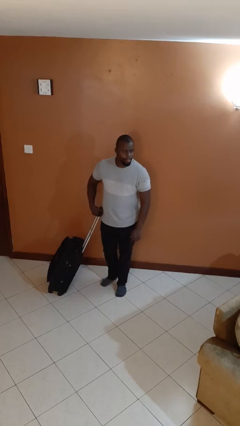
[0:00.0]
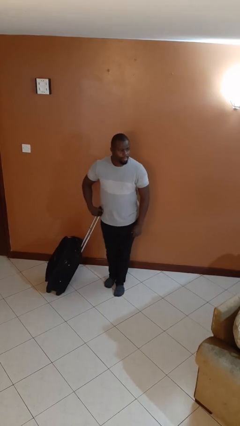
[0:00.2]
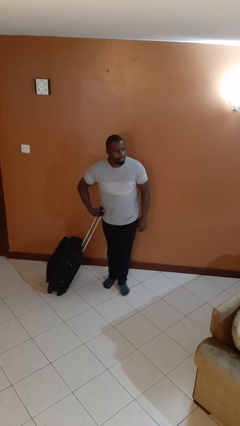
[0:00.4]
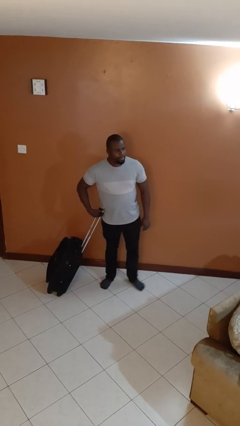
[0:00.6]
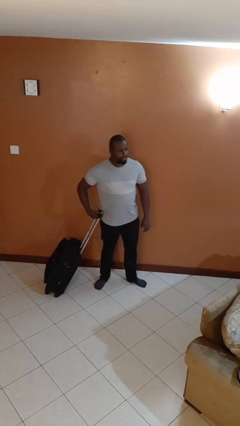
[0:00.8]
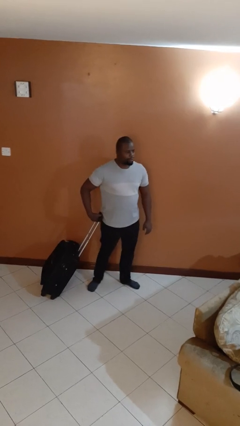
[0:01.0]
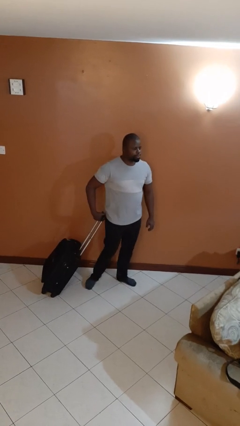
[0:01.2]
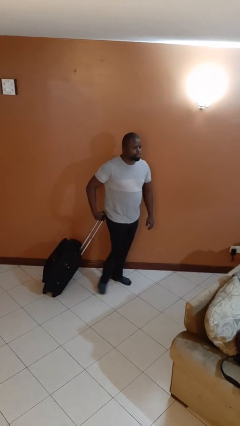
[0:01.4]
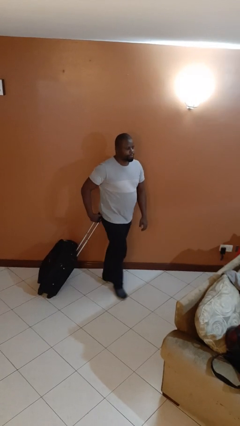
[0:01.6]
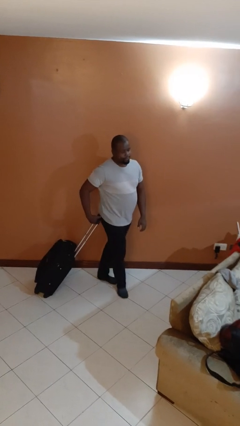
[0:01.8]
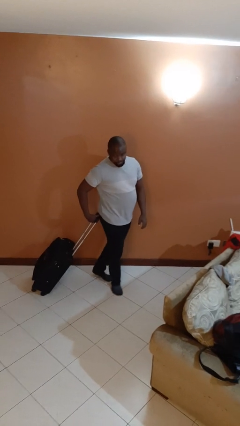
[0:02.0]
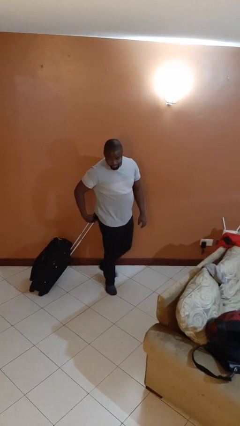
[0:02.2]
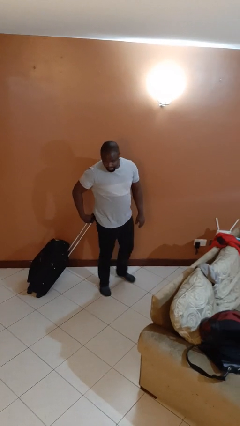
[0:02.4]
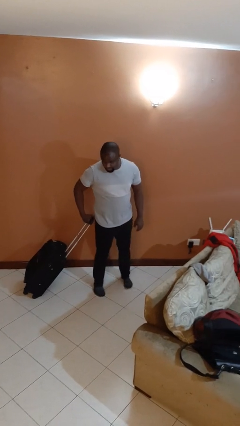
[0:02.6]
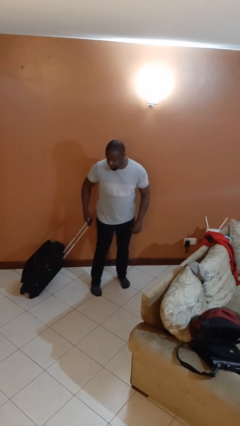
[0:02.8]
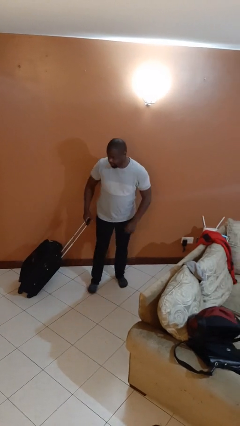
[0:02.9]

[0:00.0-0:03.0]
person pulls wheeled cart

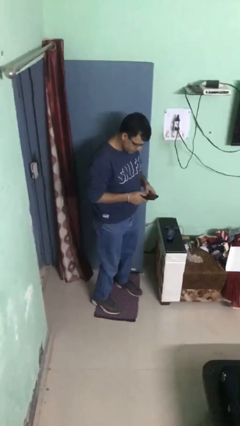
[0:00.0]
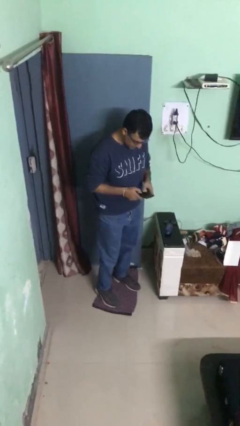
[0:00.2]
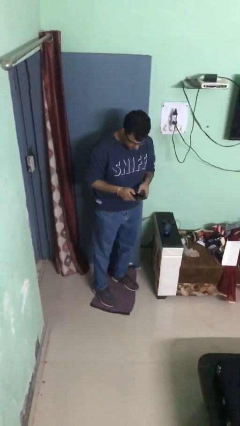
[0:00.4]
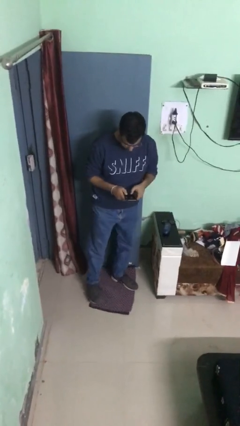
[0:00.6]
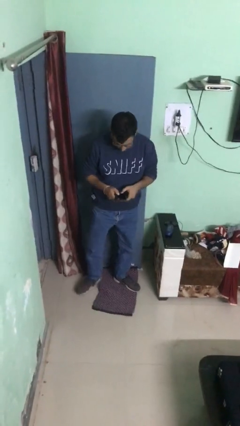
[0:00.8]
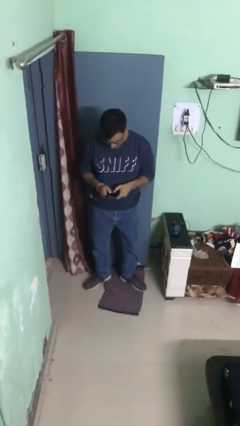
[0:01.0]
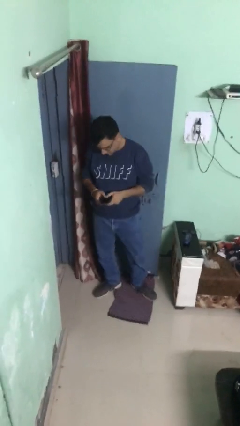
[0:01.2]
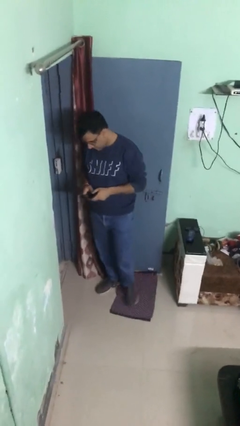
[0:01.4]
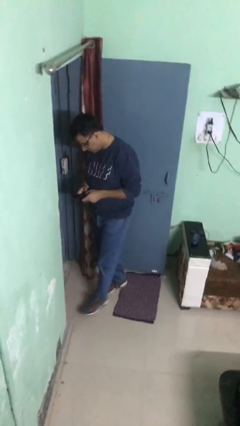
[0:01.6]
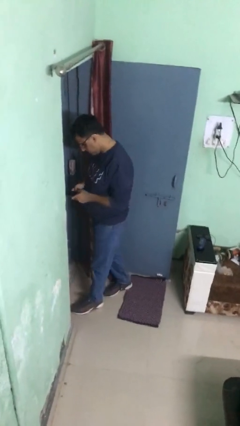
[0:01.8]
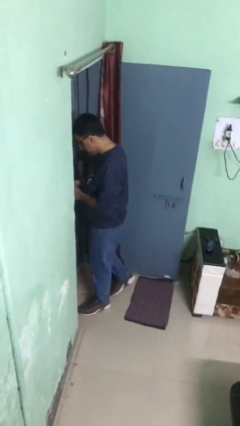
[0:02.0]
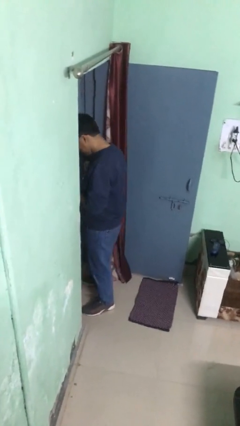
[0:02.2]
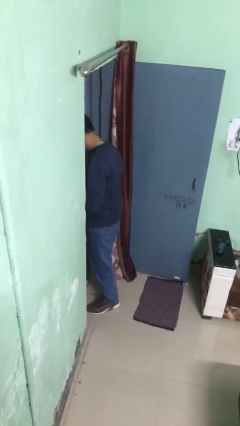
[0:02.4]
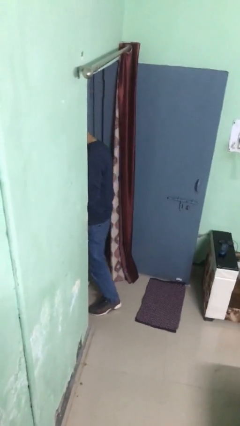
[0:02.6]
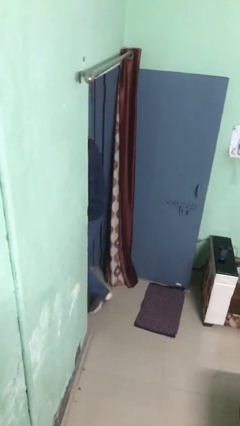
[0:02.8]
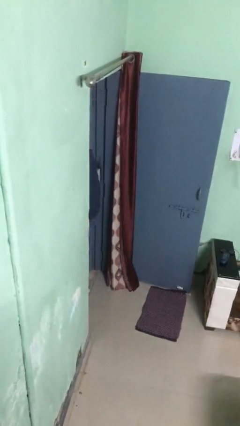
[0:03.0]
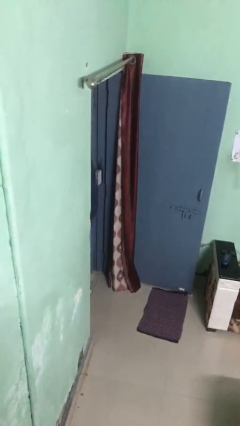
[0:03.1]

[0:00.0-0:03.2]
person exits scene through structure

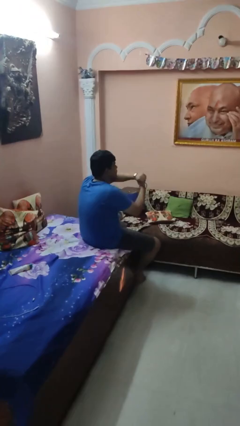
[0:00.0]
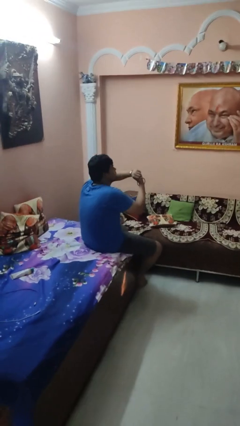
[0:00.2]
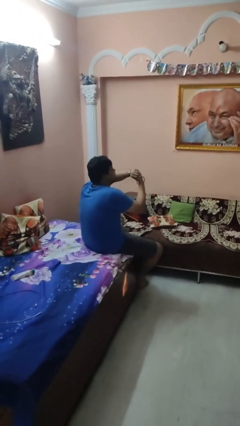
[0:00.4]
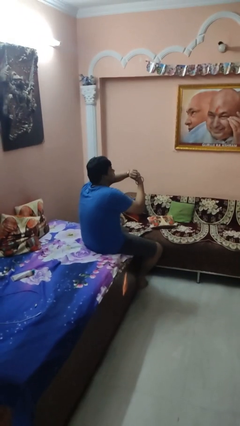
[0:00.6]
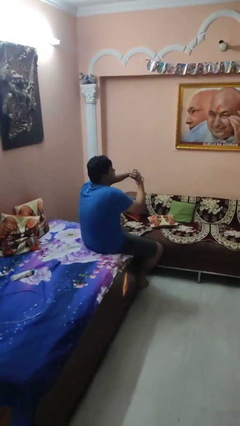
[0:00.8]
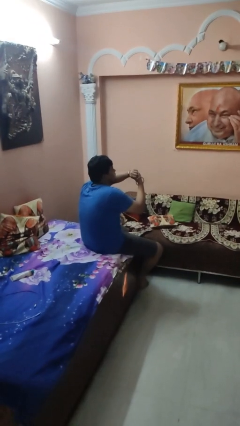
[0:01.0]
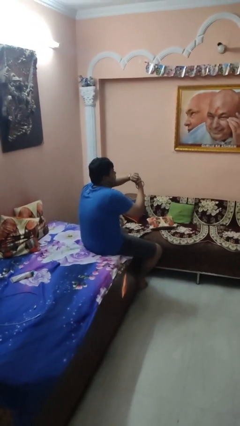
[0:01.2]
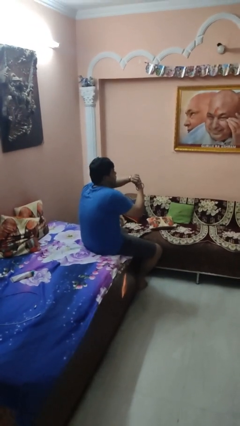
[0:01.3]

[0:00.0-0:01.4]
person looks at wristwatch

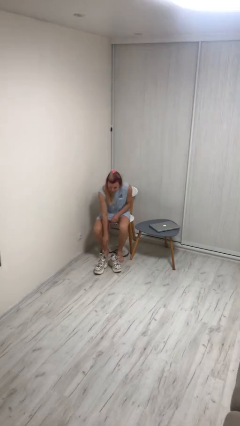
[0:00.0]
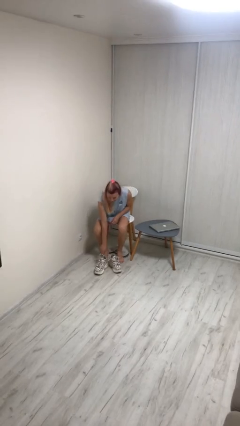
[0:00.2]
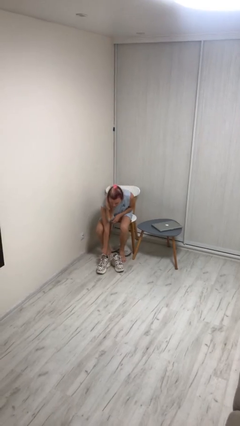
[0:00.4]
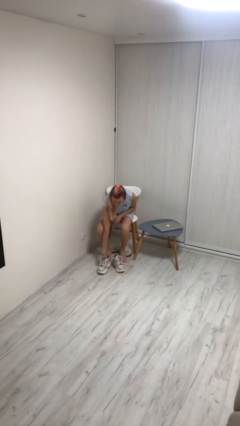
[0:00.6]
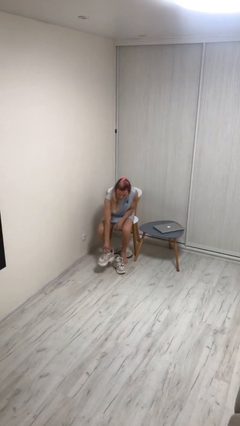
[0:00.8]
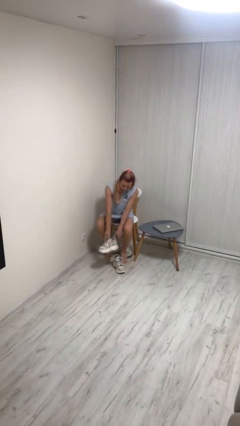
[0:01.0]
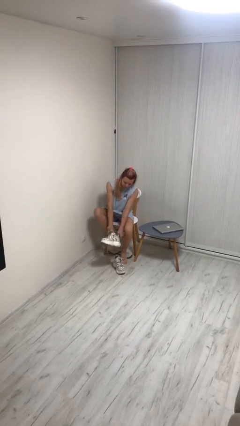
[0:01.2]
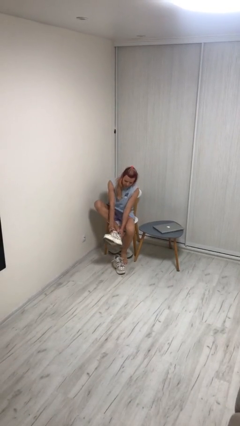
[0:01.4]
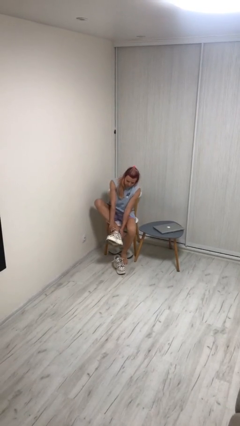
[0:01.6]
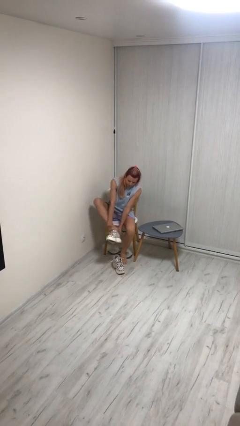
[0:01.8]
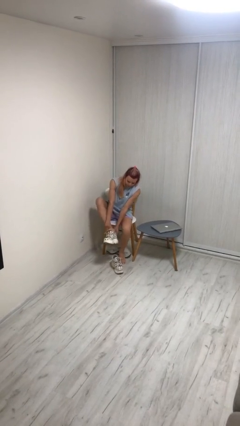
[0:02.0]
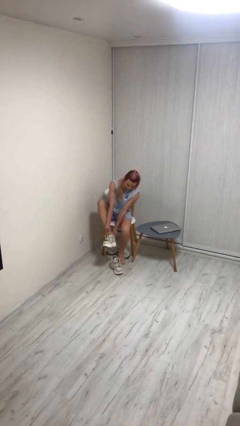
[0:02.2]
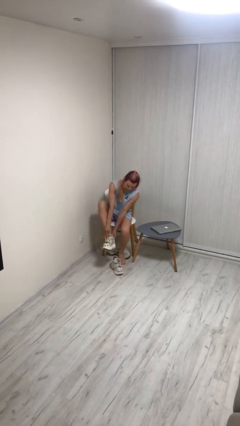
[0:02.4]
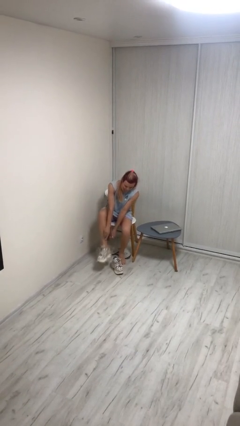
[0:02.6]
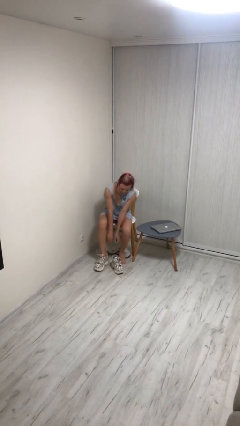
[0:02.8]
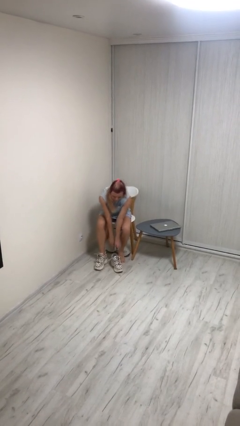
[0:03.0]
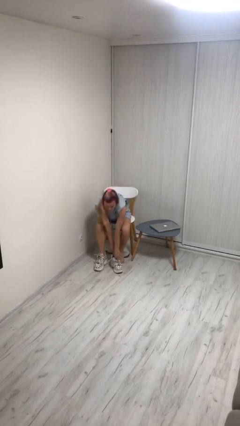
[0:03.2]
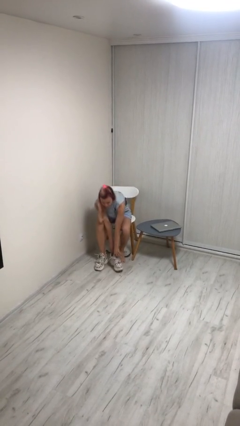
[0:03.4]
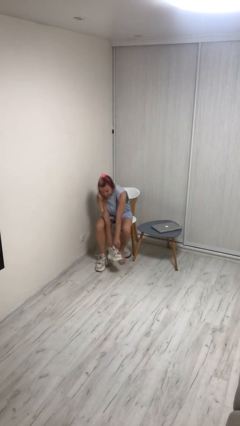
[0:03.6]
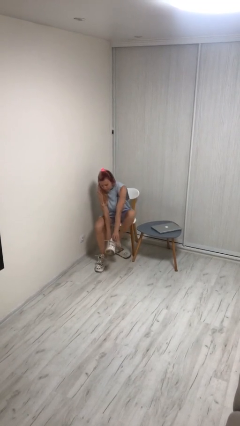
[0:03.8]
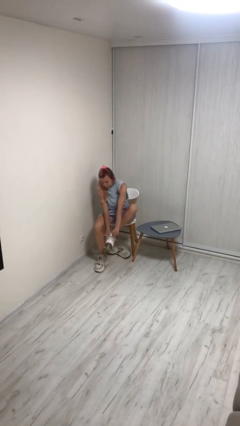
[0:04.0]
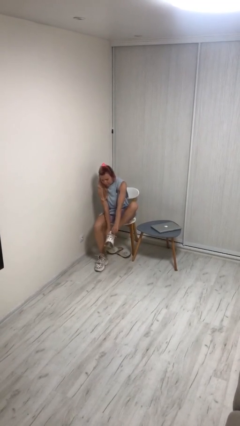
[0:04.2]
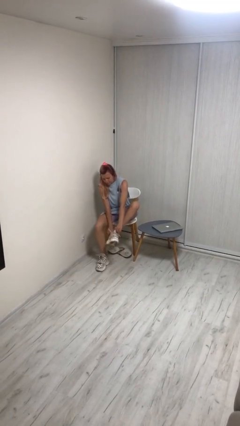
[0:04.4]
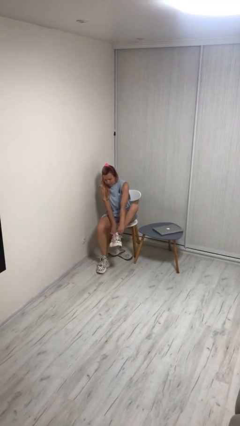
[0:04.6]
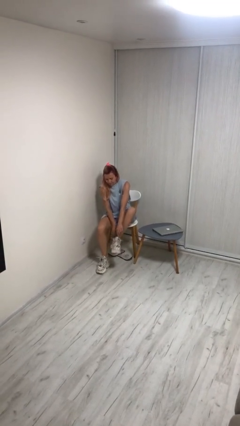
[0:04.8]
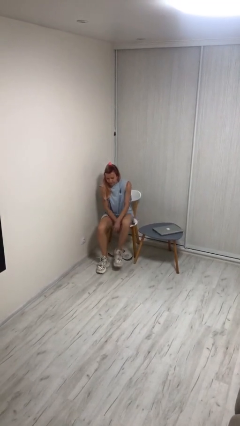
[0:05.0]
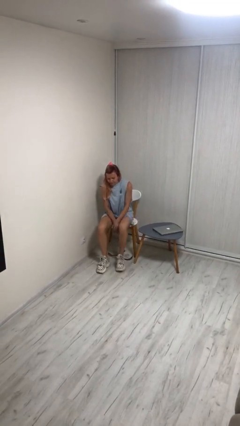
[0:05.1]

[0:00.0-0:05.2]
person puts on boots

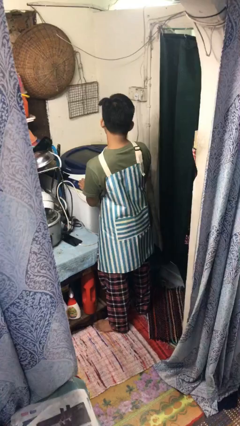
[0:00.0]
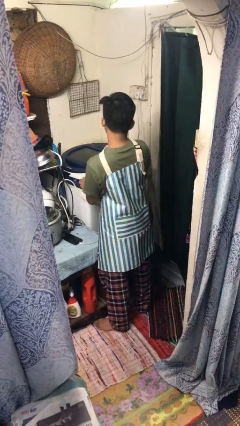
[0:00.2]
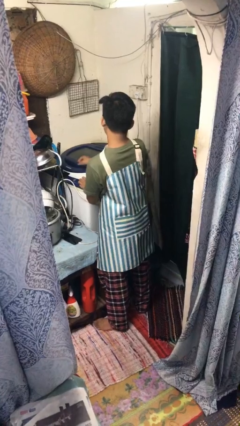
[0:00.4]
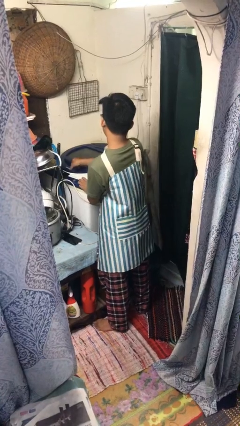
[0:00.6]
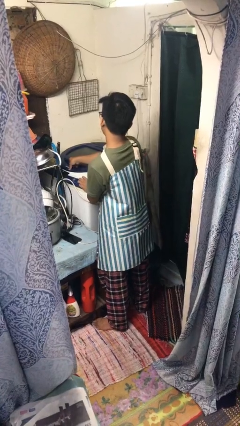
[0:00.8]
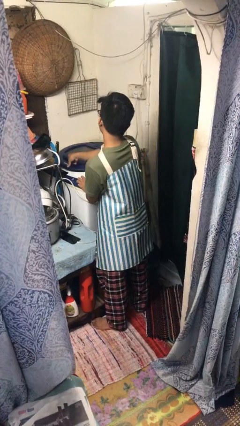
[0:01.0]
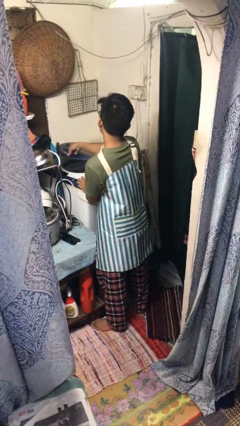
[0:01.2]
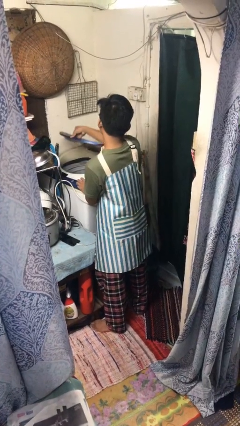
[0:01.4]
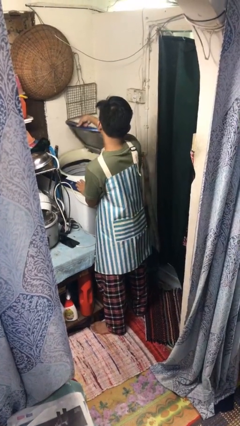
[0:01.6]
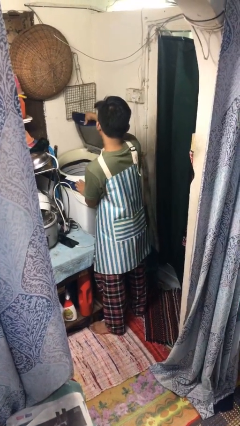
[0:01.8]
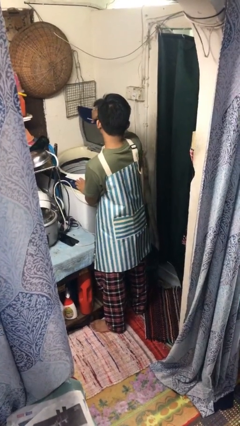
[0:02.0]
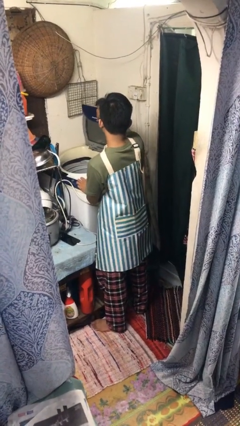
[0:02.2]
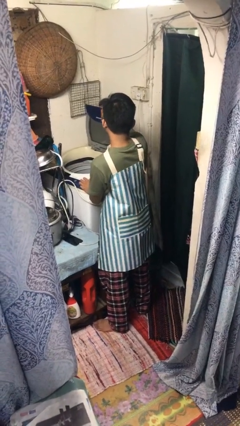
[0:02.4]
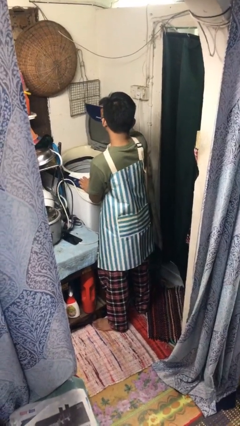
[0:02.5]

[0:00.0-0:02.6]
person opens clothes washer

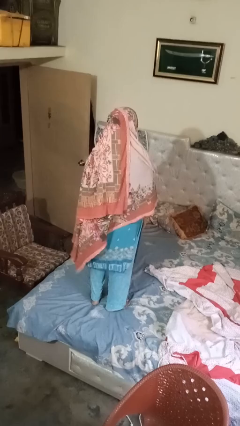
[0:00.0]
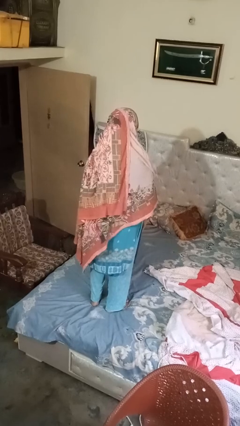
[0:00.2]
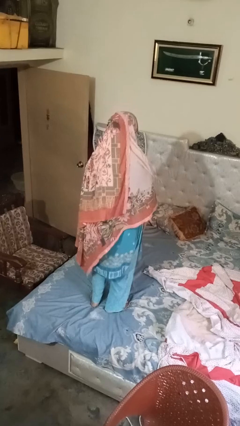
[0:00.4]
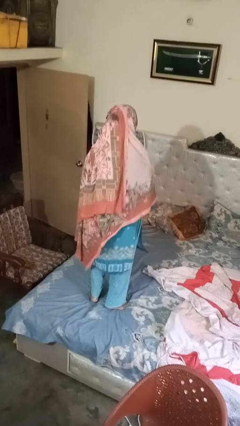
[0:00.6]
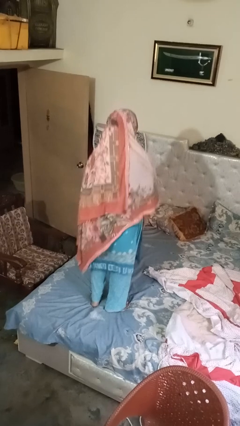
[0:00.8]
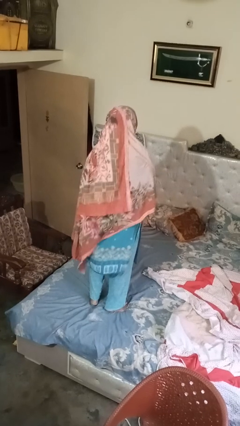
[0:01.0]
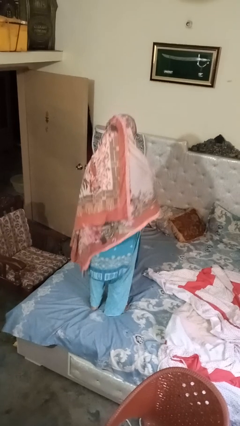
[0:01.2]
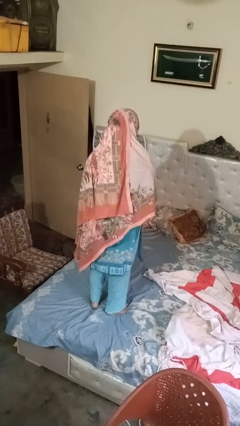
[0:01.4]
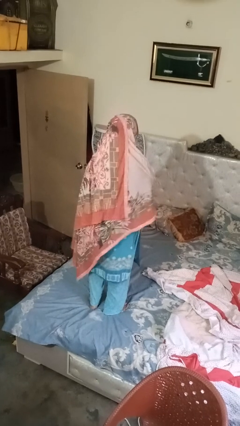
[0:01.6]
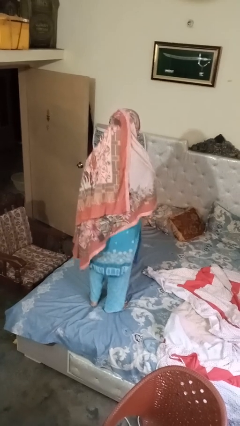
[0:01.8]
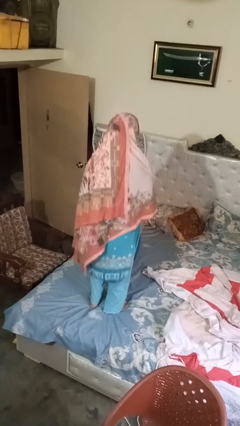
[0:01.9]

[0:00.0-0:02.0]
person jumps on bed

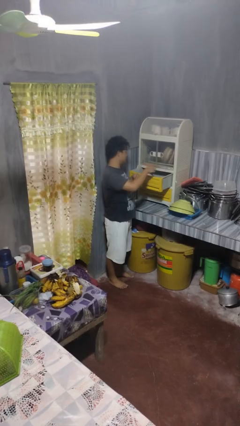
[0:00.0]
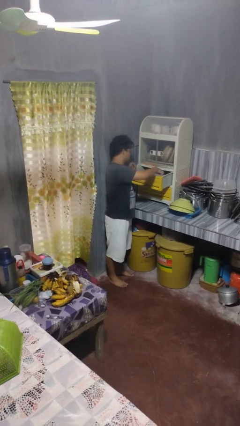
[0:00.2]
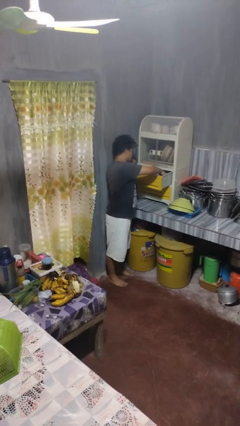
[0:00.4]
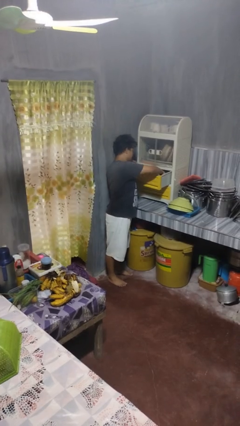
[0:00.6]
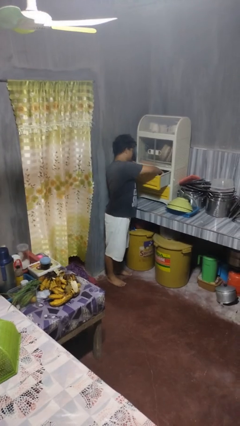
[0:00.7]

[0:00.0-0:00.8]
person puts object into kitchen drawer
